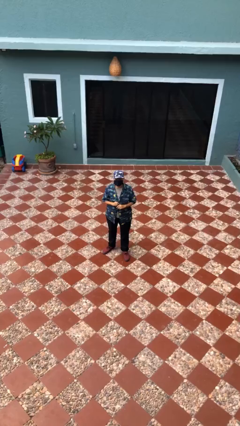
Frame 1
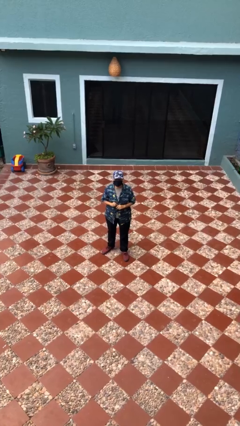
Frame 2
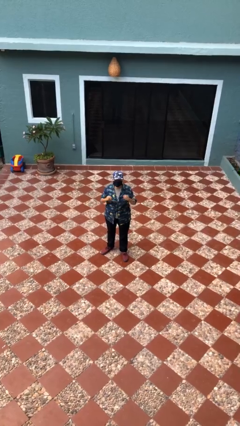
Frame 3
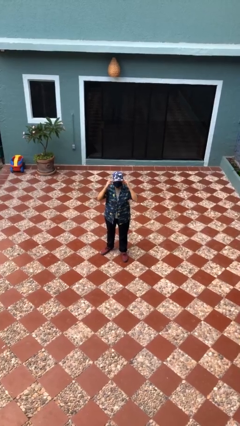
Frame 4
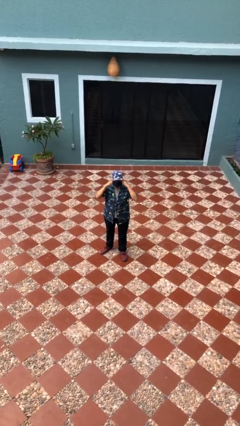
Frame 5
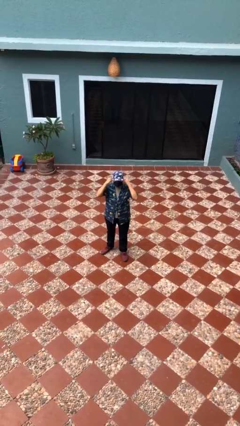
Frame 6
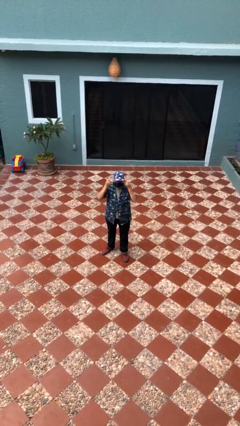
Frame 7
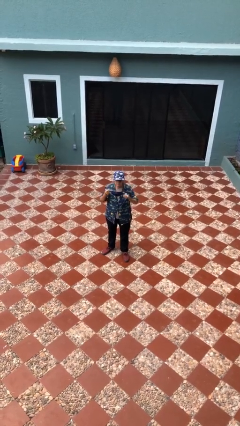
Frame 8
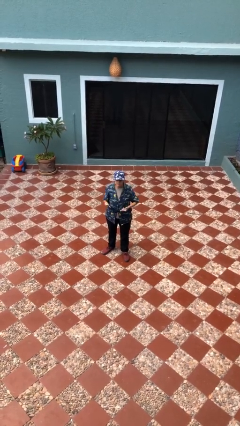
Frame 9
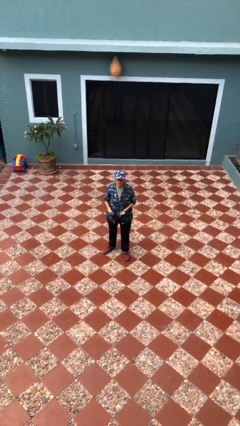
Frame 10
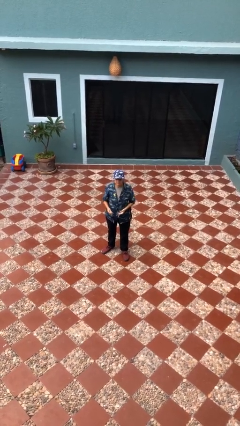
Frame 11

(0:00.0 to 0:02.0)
person takes off facemask

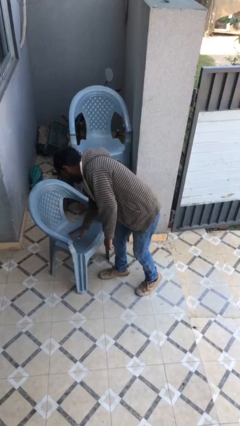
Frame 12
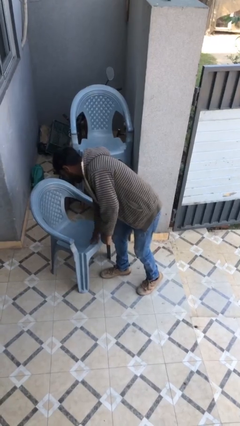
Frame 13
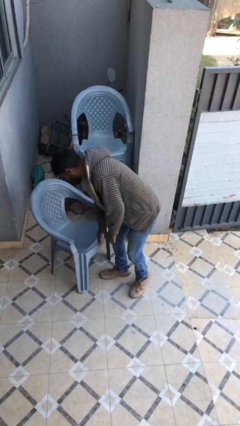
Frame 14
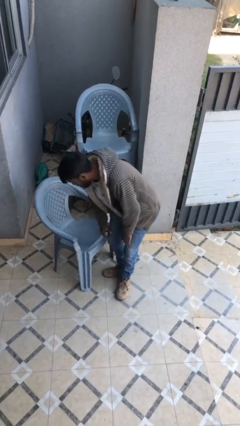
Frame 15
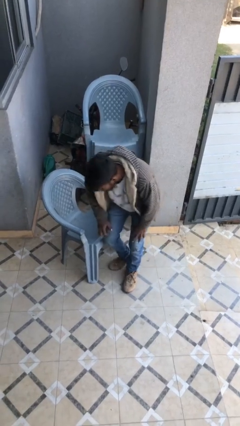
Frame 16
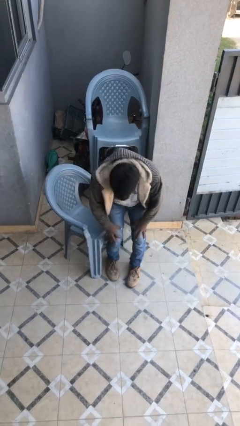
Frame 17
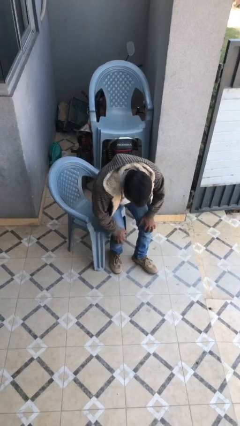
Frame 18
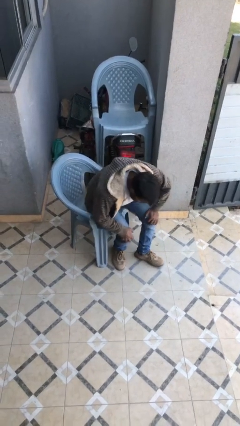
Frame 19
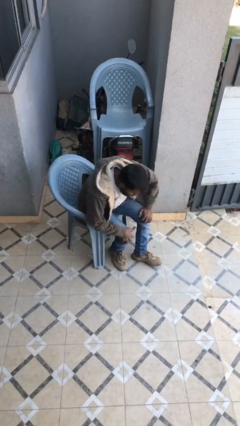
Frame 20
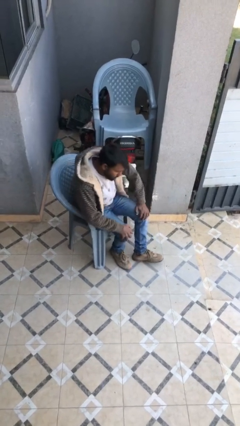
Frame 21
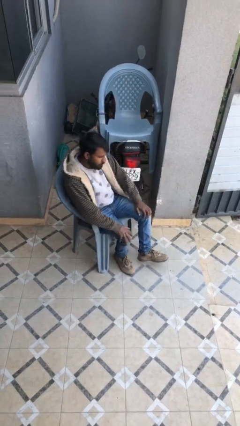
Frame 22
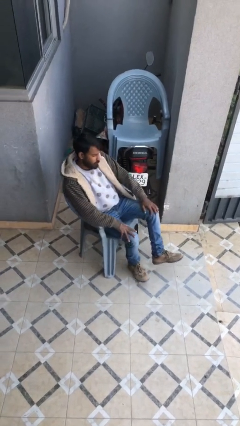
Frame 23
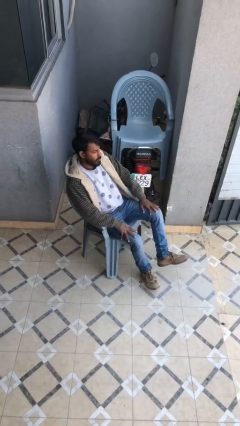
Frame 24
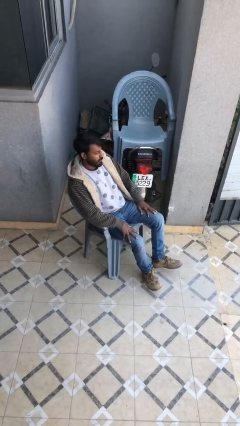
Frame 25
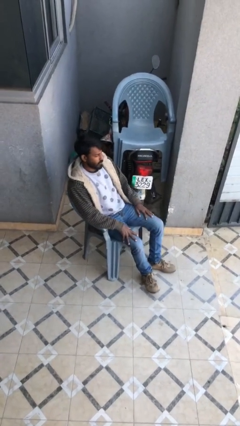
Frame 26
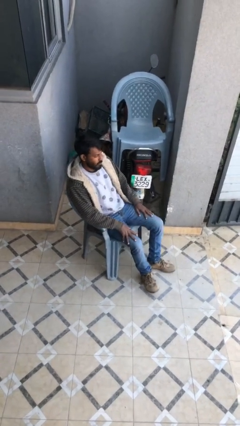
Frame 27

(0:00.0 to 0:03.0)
person sits down

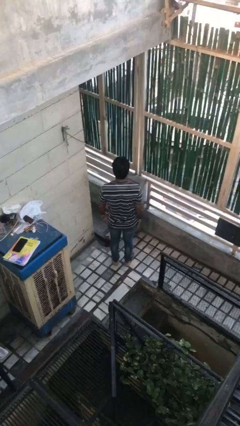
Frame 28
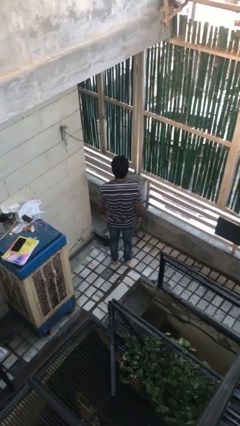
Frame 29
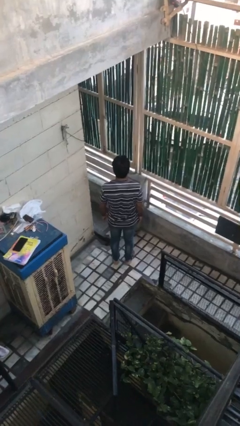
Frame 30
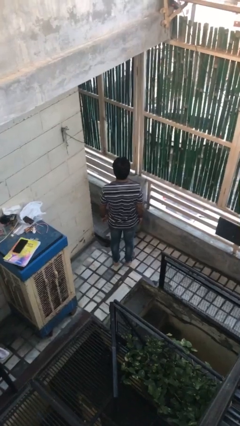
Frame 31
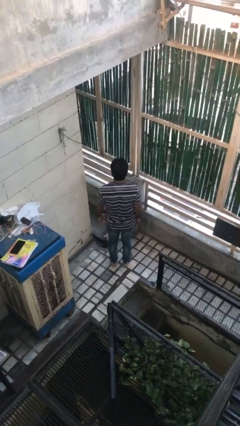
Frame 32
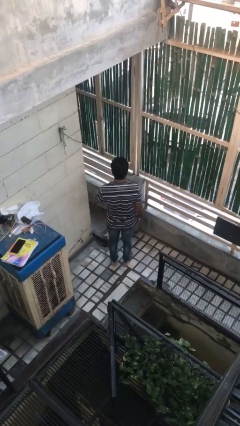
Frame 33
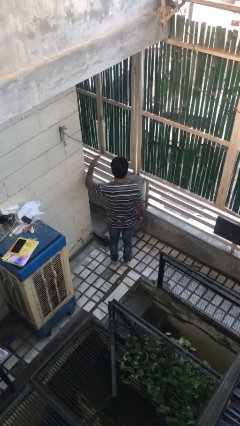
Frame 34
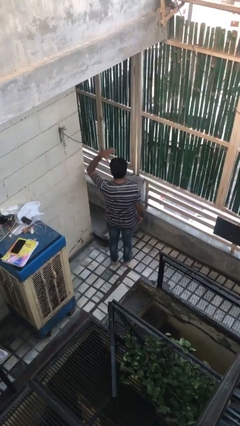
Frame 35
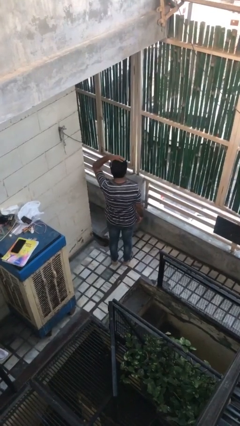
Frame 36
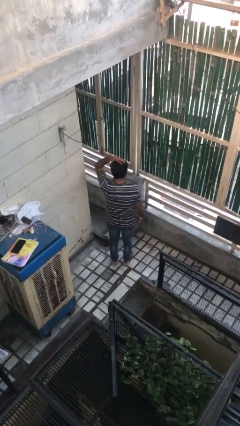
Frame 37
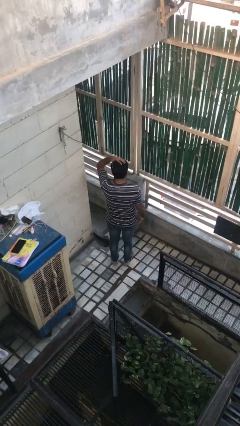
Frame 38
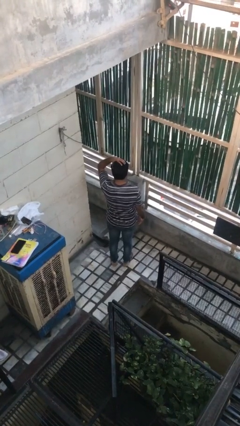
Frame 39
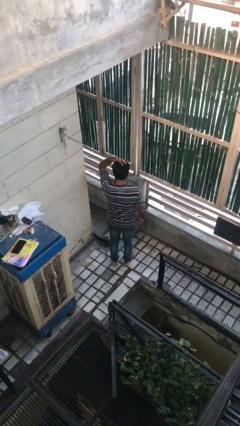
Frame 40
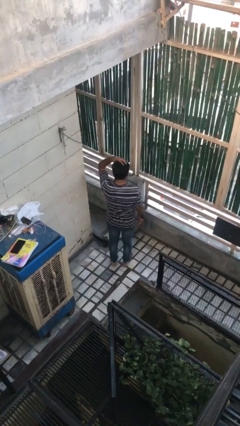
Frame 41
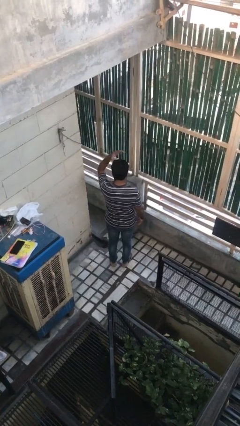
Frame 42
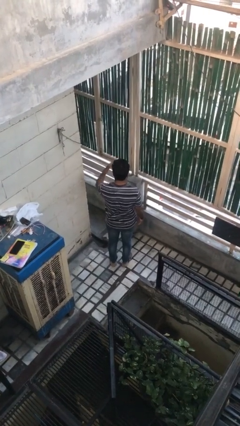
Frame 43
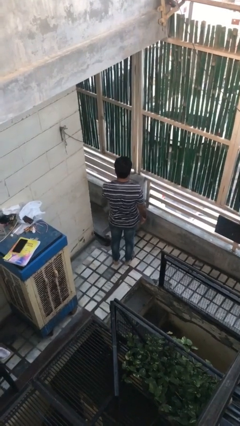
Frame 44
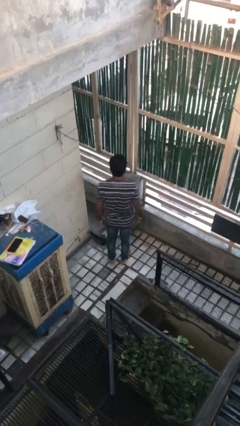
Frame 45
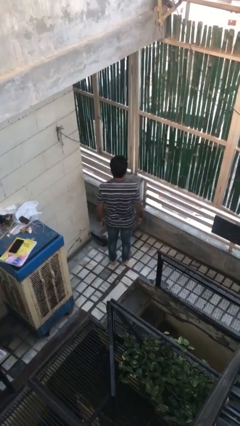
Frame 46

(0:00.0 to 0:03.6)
person pats head

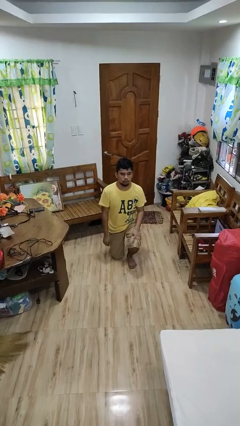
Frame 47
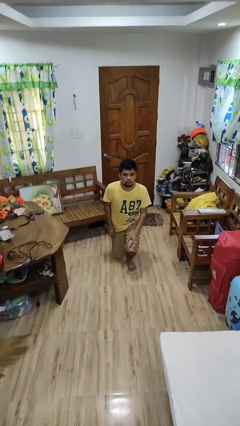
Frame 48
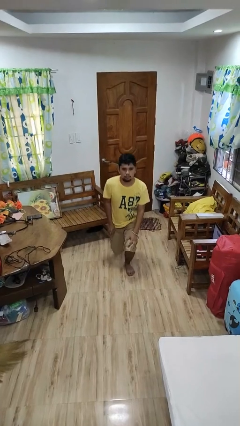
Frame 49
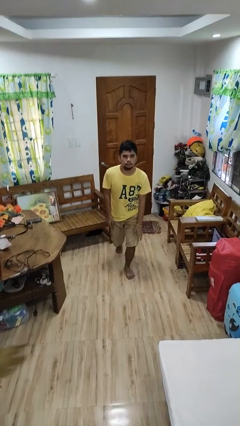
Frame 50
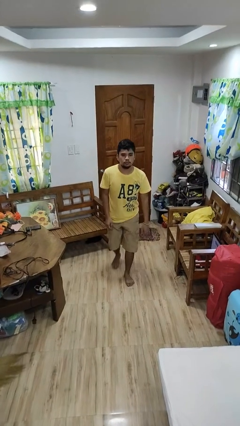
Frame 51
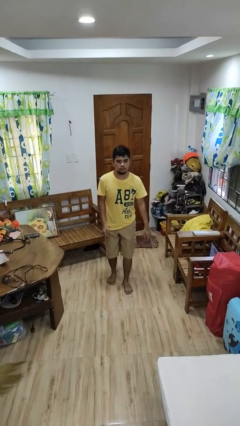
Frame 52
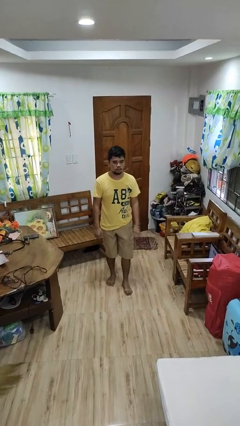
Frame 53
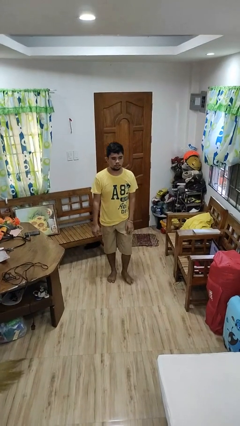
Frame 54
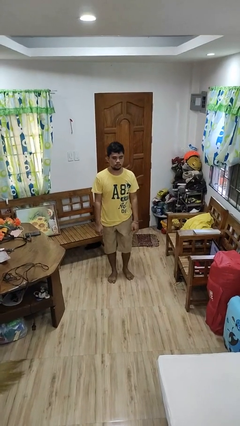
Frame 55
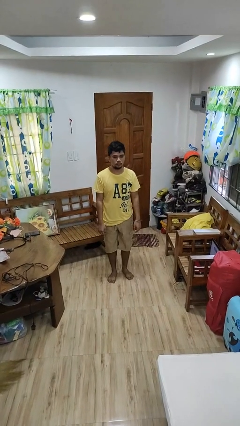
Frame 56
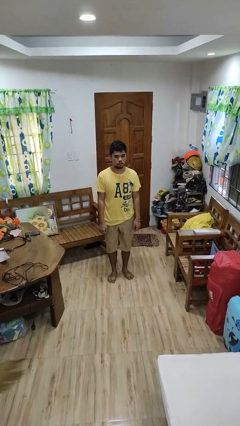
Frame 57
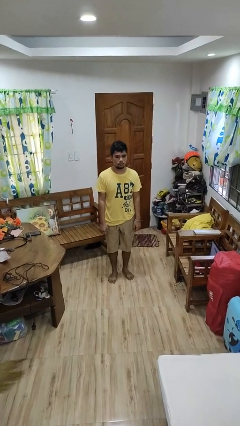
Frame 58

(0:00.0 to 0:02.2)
person stands up from floor

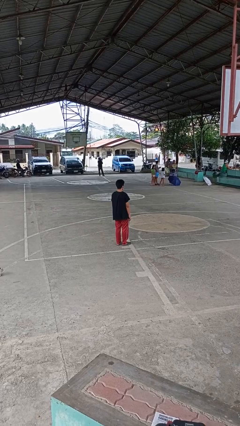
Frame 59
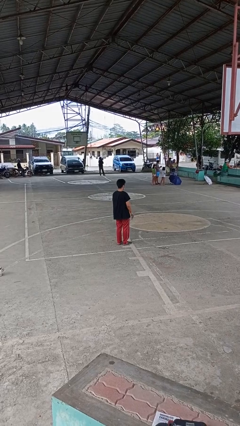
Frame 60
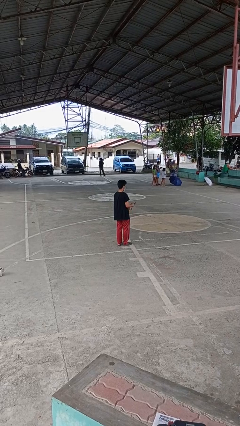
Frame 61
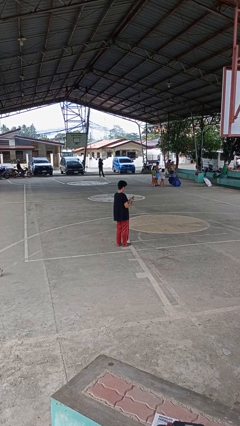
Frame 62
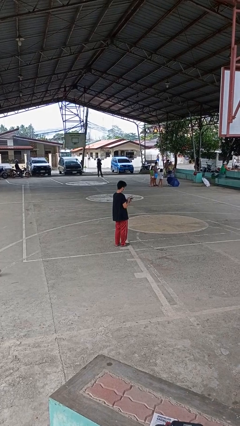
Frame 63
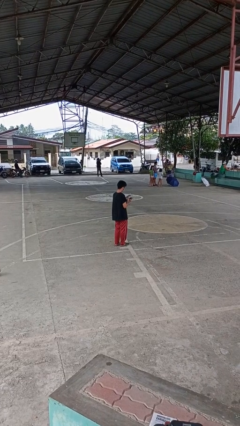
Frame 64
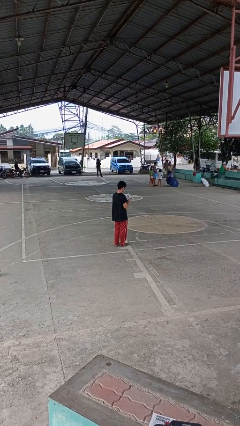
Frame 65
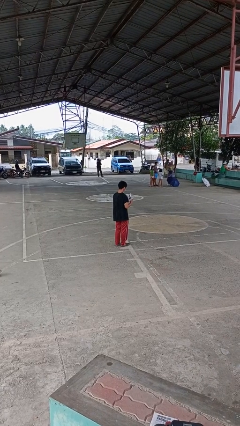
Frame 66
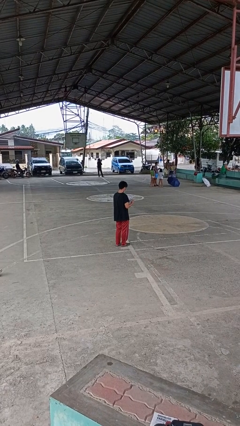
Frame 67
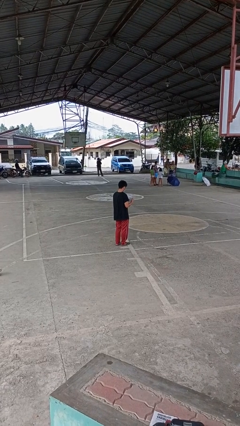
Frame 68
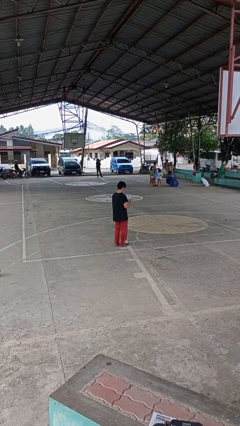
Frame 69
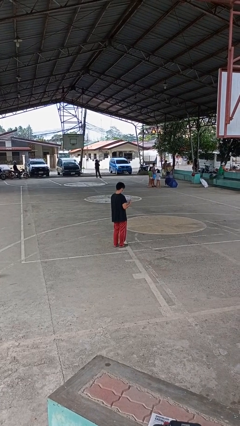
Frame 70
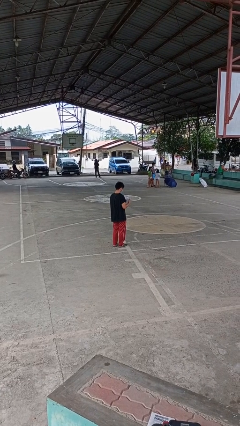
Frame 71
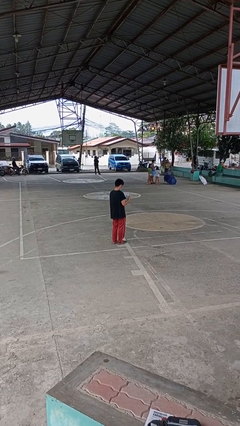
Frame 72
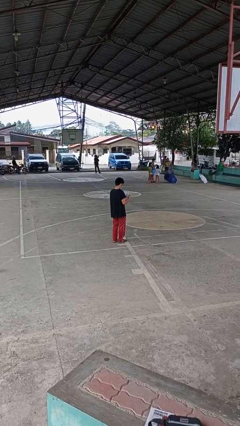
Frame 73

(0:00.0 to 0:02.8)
person reads magazine

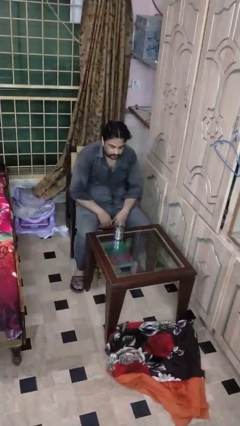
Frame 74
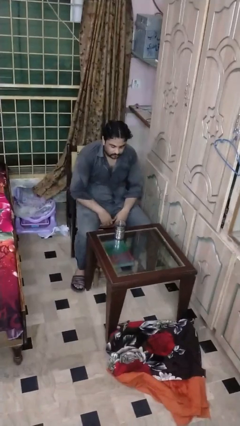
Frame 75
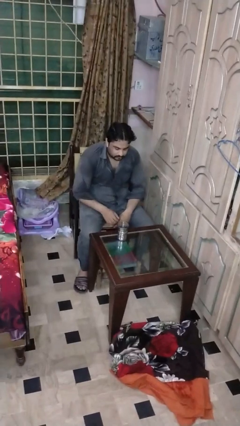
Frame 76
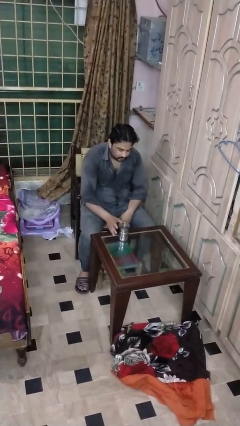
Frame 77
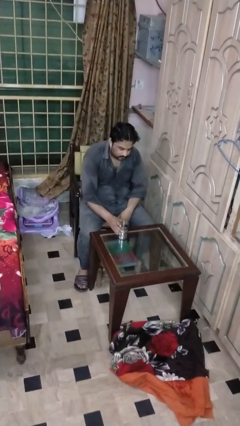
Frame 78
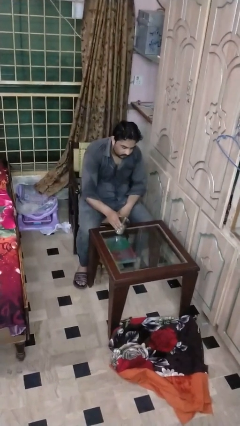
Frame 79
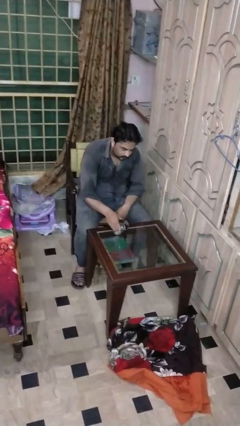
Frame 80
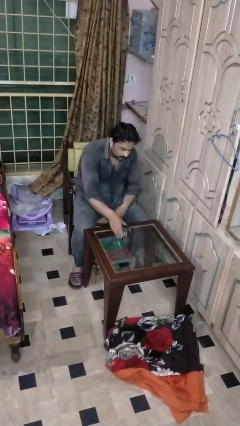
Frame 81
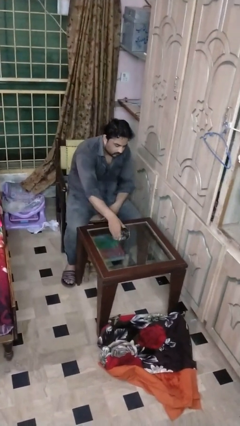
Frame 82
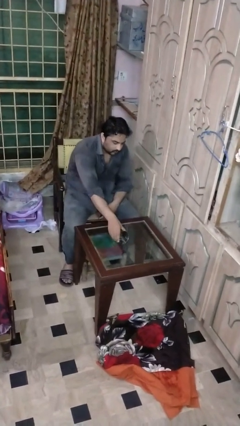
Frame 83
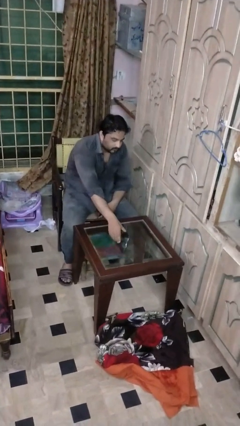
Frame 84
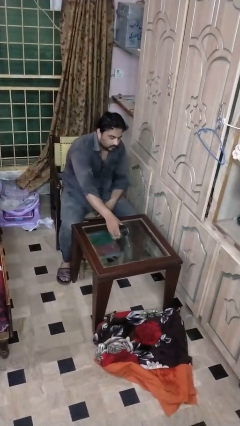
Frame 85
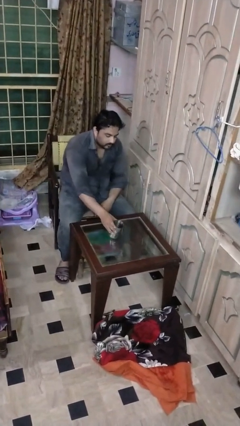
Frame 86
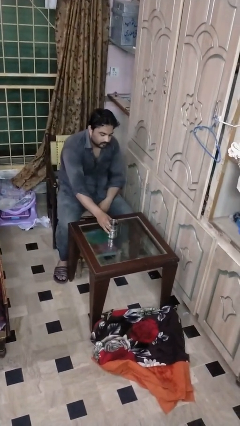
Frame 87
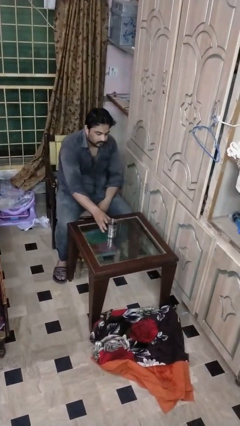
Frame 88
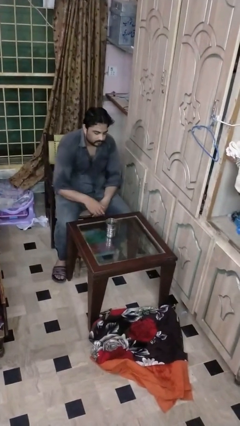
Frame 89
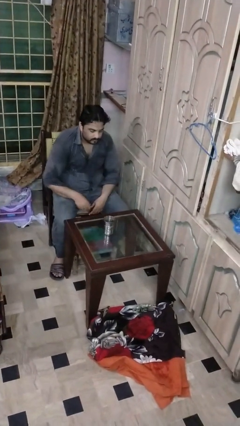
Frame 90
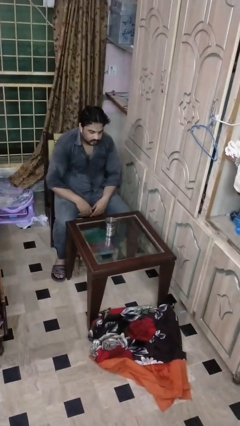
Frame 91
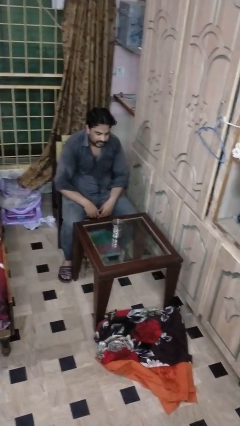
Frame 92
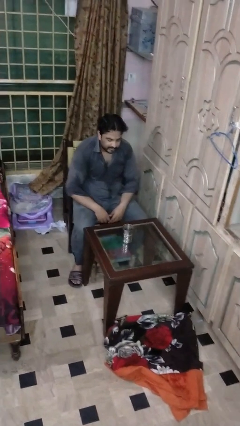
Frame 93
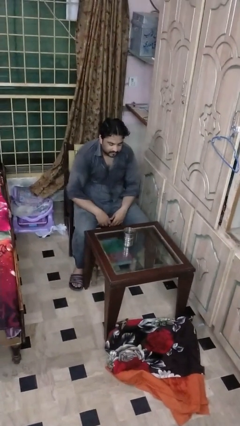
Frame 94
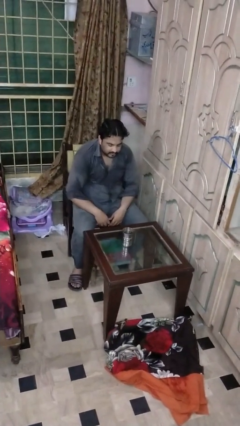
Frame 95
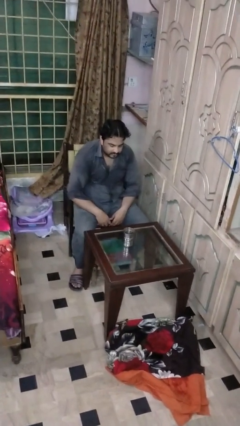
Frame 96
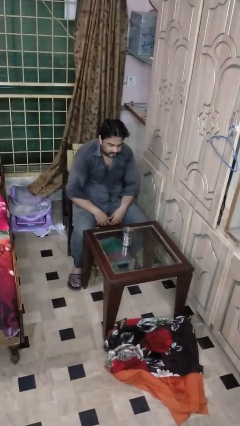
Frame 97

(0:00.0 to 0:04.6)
person spills on table
